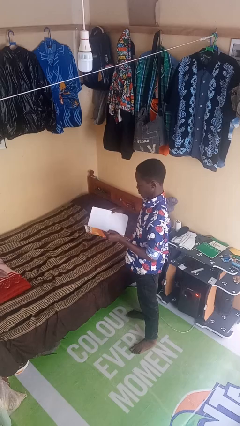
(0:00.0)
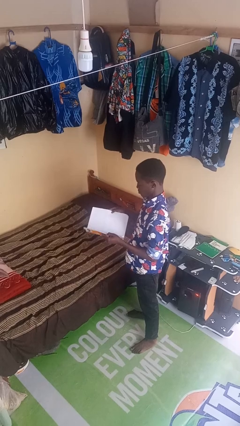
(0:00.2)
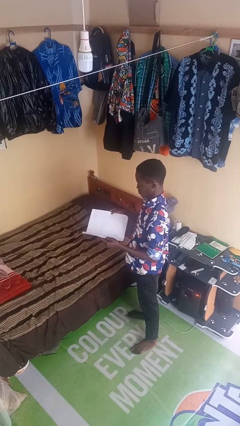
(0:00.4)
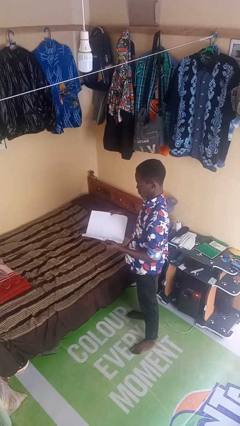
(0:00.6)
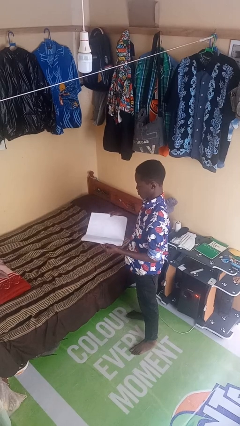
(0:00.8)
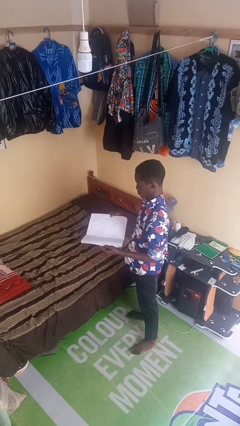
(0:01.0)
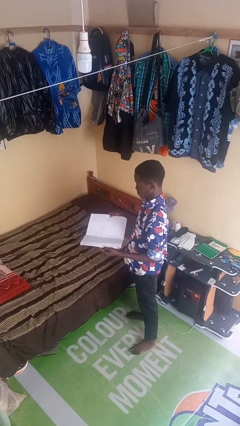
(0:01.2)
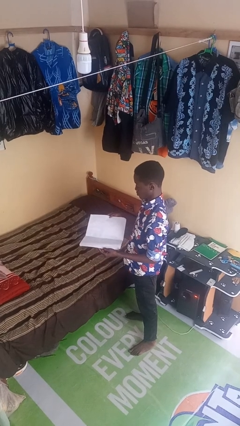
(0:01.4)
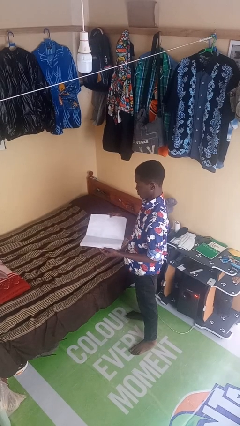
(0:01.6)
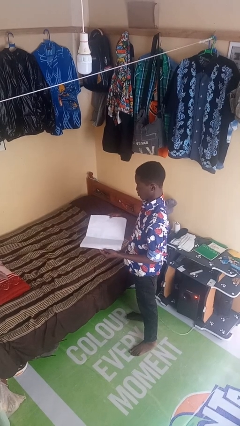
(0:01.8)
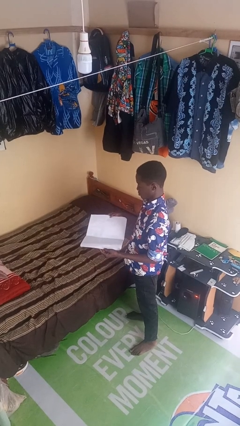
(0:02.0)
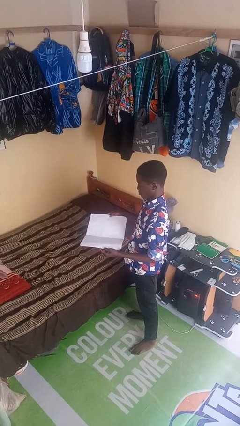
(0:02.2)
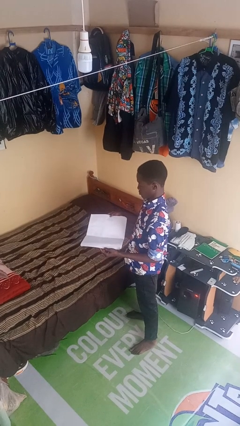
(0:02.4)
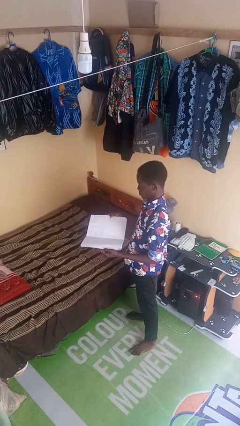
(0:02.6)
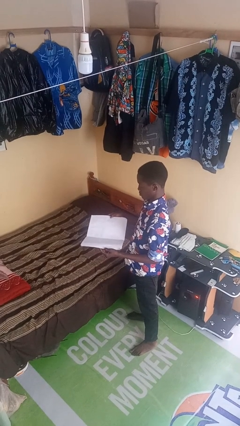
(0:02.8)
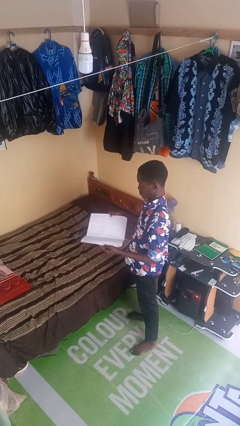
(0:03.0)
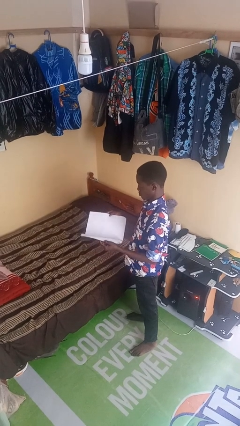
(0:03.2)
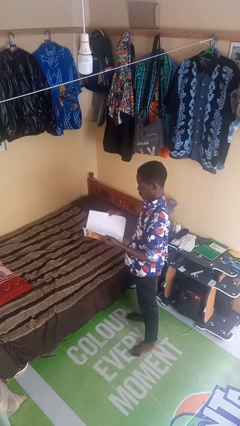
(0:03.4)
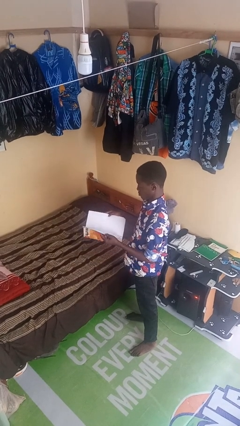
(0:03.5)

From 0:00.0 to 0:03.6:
person reads book

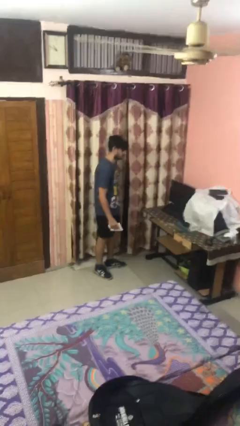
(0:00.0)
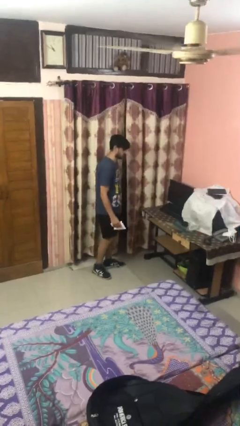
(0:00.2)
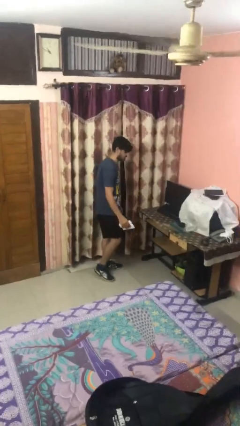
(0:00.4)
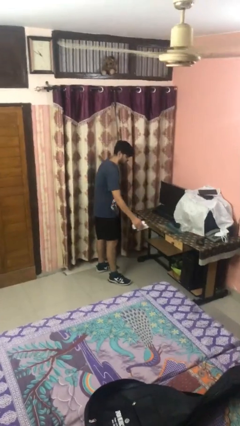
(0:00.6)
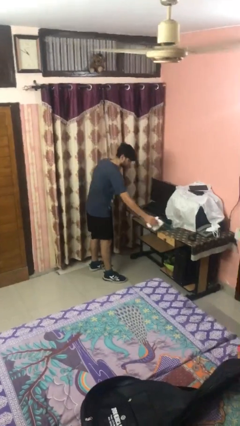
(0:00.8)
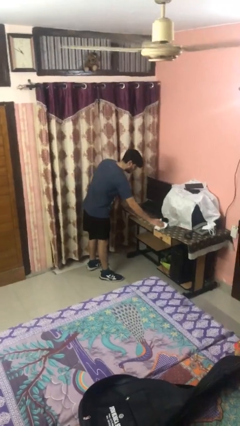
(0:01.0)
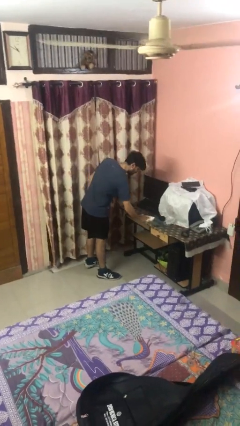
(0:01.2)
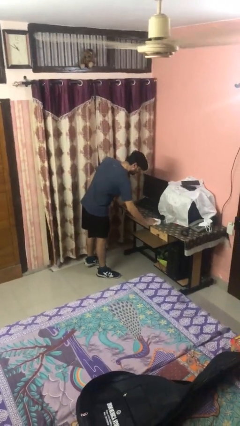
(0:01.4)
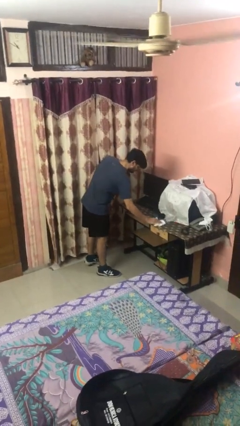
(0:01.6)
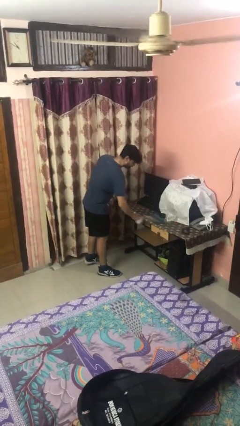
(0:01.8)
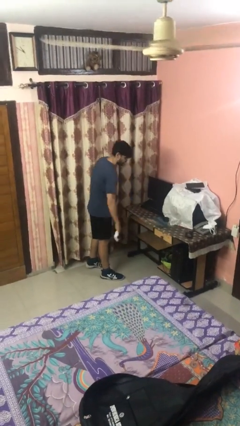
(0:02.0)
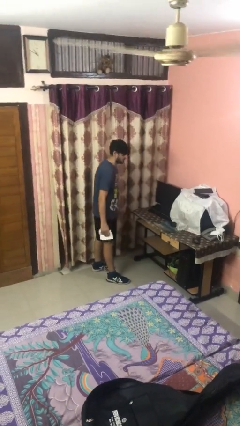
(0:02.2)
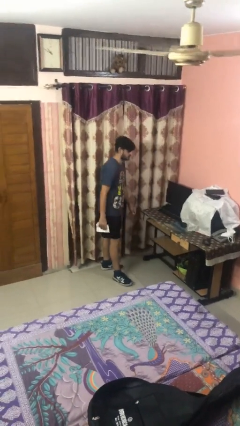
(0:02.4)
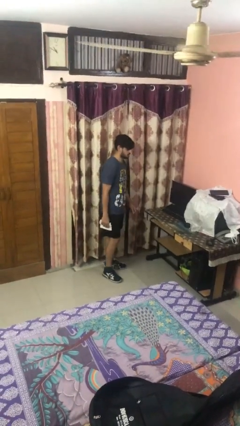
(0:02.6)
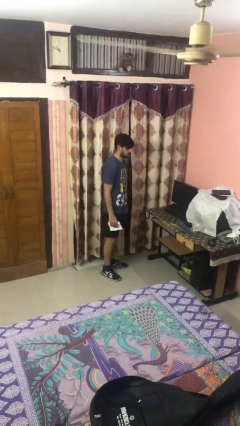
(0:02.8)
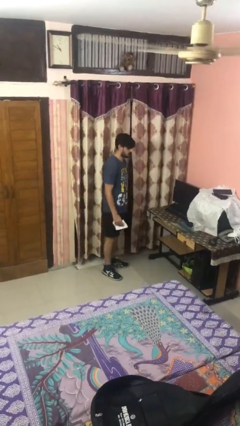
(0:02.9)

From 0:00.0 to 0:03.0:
person cleans table with rag

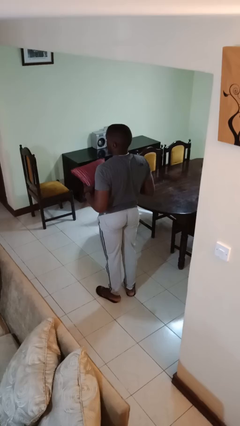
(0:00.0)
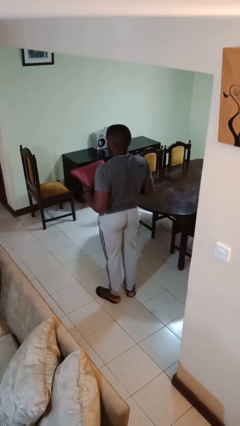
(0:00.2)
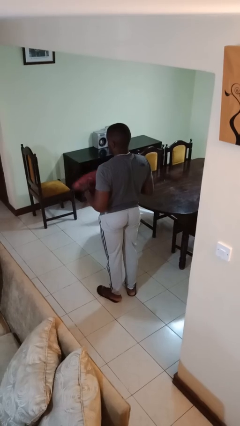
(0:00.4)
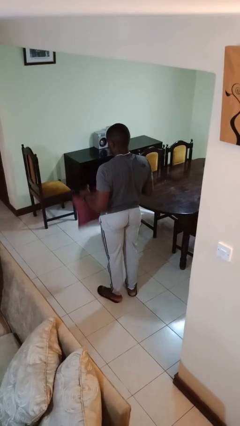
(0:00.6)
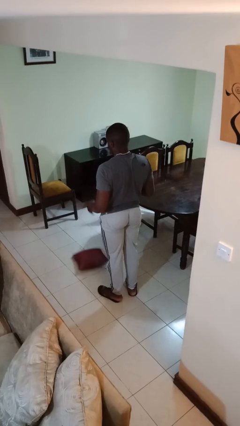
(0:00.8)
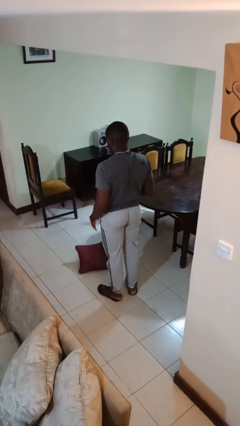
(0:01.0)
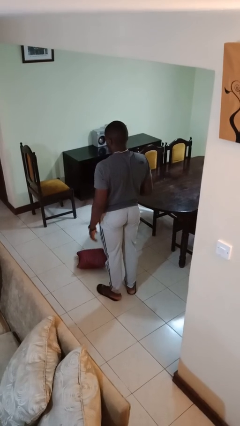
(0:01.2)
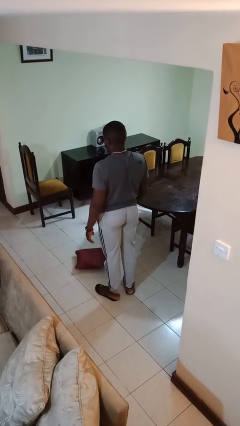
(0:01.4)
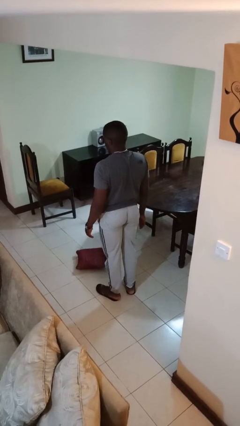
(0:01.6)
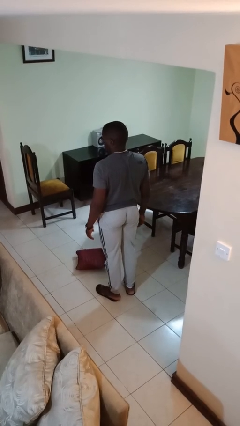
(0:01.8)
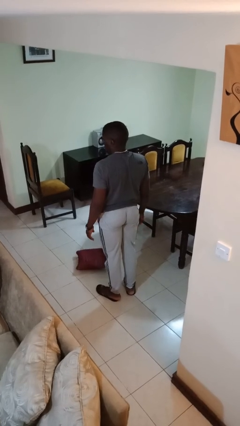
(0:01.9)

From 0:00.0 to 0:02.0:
person throws object to ground

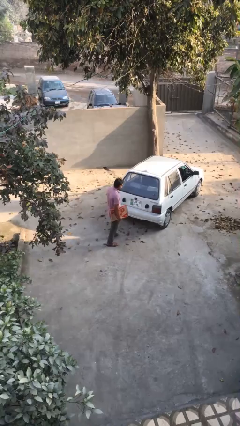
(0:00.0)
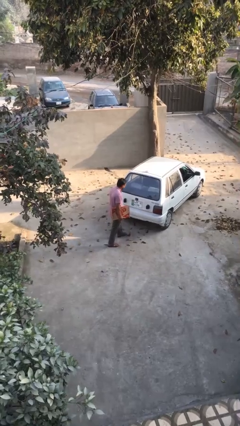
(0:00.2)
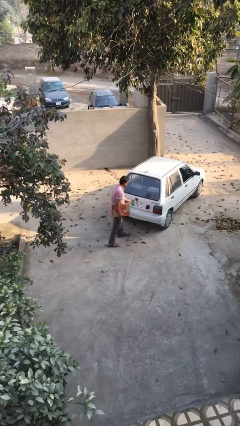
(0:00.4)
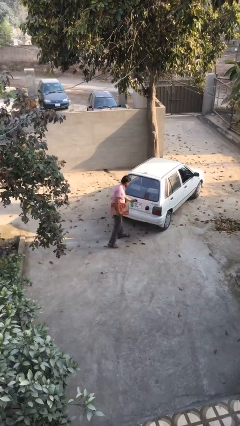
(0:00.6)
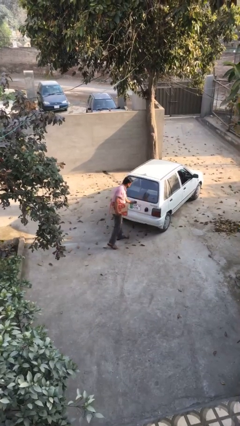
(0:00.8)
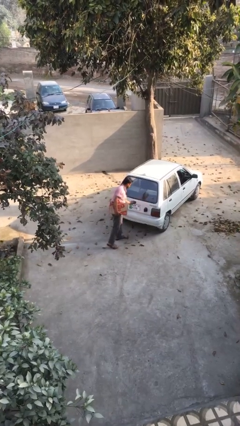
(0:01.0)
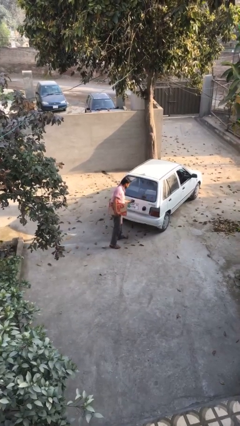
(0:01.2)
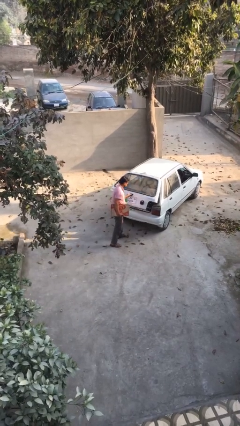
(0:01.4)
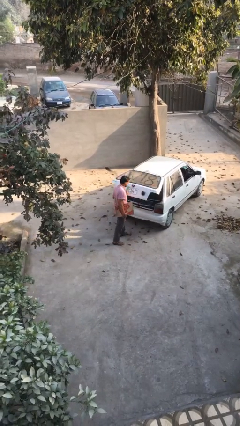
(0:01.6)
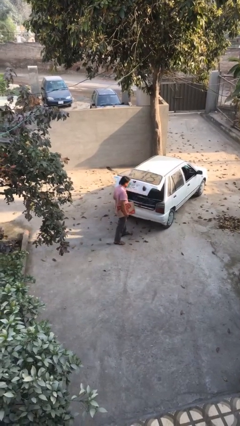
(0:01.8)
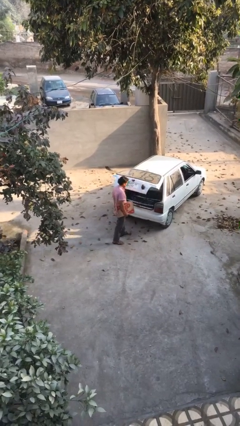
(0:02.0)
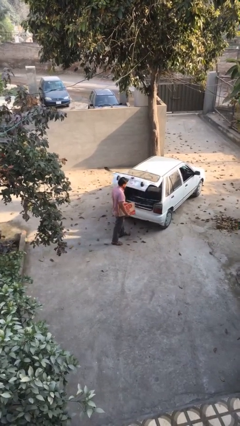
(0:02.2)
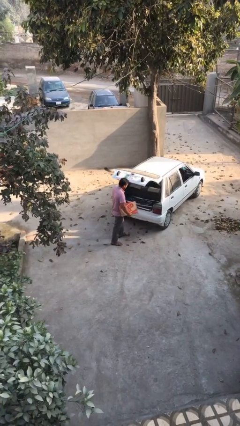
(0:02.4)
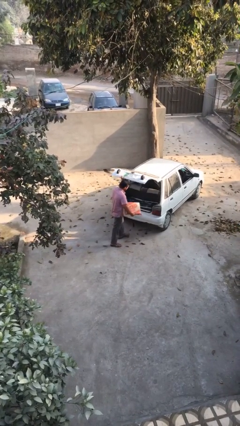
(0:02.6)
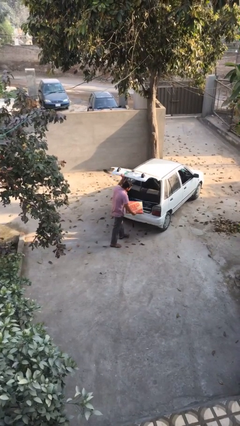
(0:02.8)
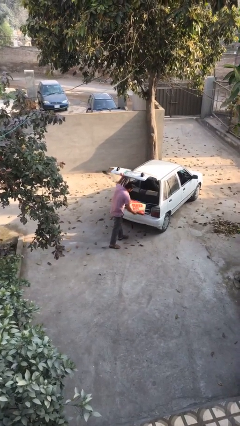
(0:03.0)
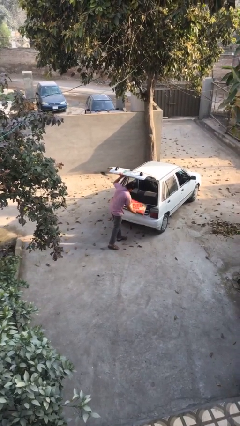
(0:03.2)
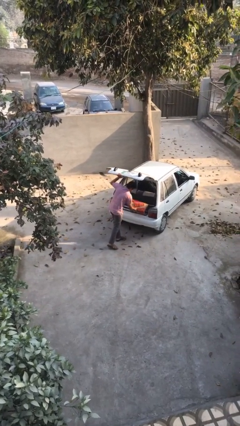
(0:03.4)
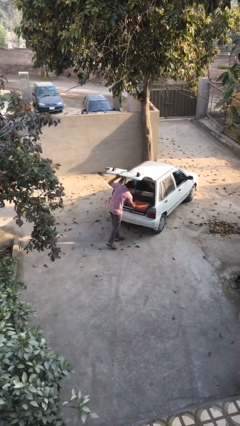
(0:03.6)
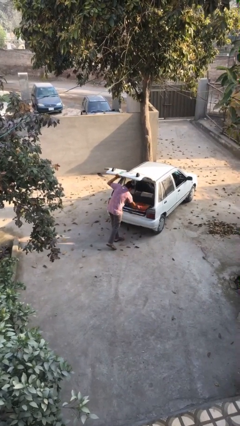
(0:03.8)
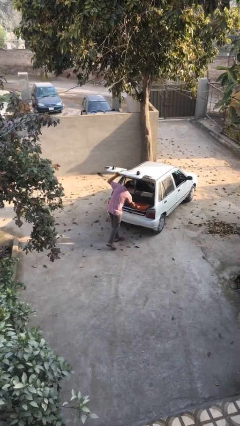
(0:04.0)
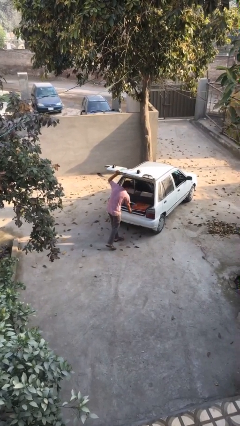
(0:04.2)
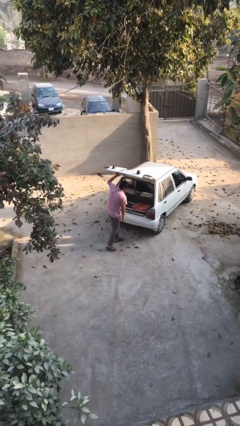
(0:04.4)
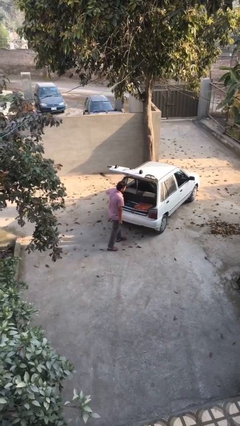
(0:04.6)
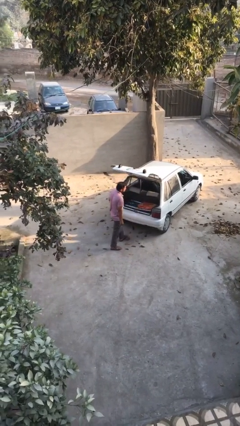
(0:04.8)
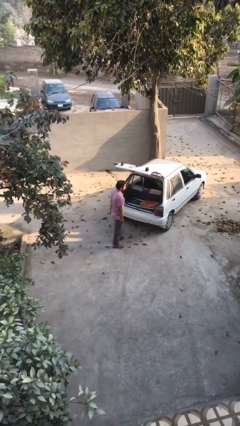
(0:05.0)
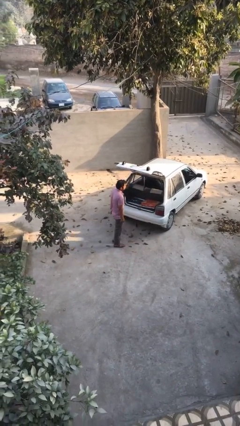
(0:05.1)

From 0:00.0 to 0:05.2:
person loads car

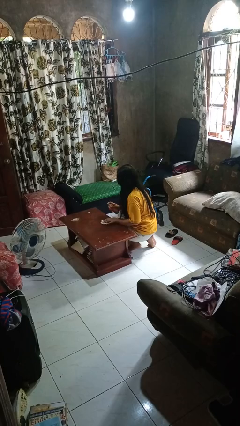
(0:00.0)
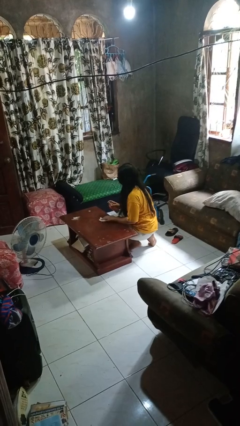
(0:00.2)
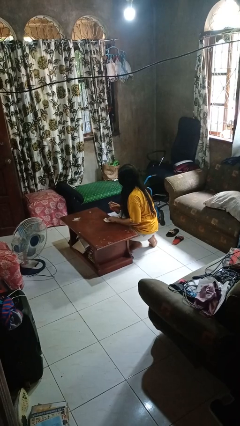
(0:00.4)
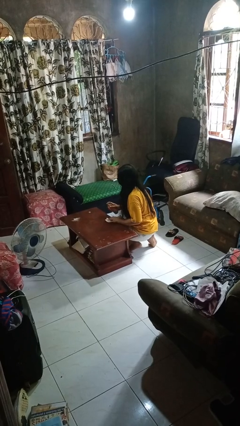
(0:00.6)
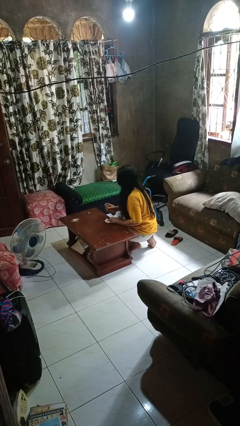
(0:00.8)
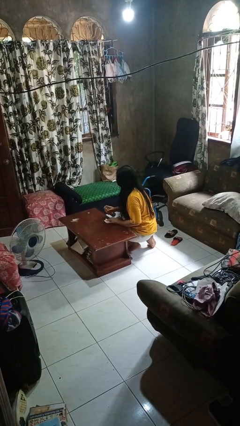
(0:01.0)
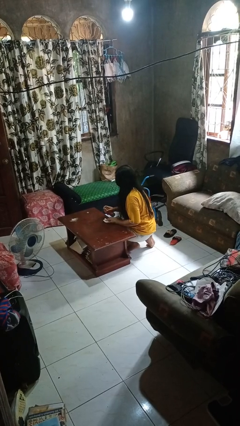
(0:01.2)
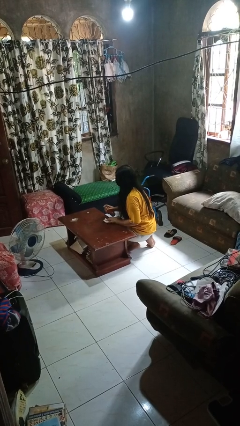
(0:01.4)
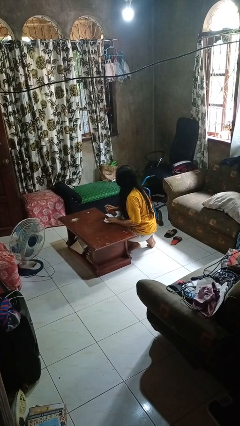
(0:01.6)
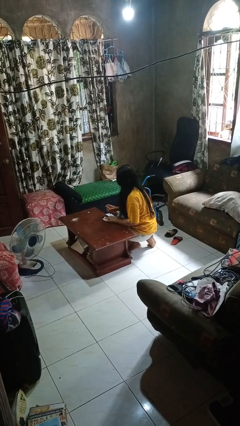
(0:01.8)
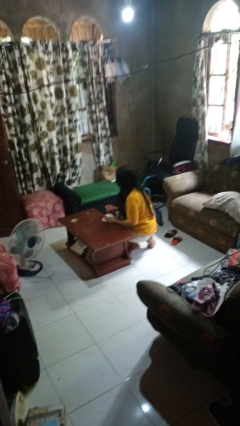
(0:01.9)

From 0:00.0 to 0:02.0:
person sprays from bottle
